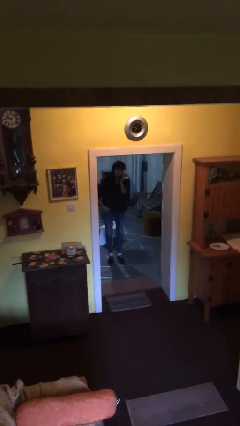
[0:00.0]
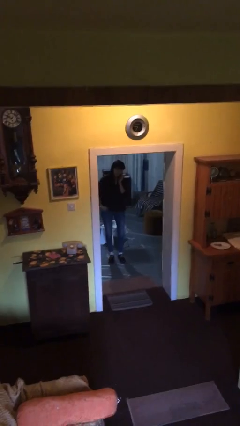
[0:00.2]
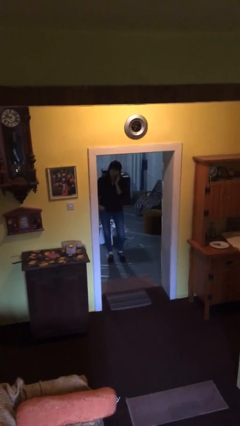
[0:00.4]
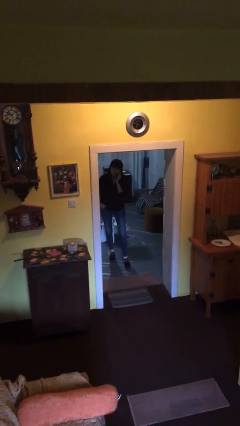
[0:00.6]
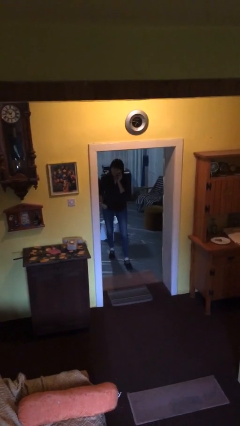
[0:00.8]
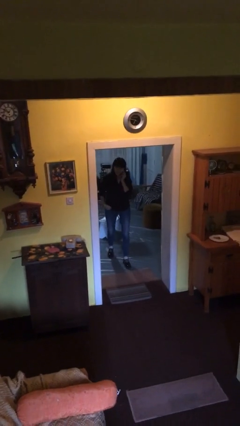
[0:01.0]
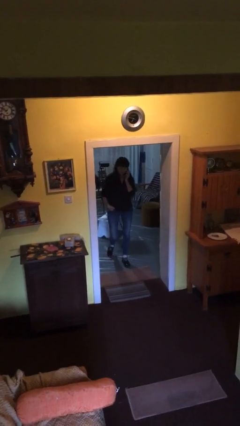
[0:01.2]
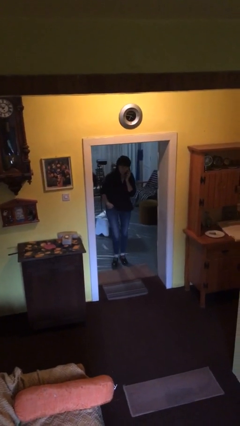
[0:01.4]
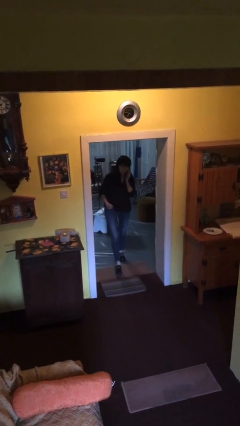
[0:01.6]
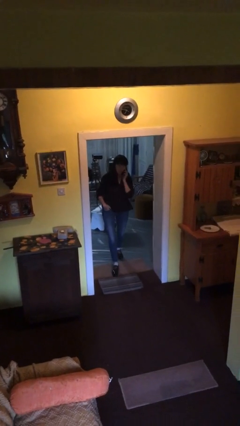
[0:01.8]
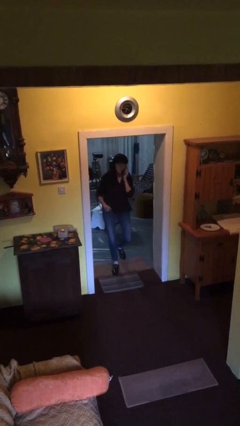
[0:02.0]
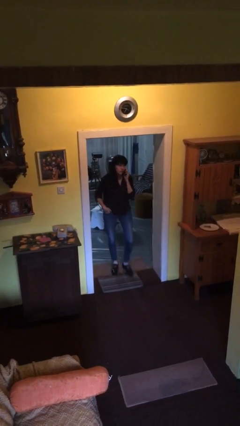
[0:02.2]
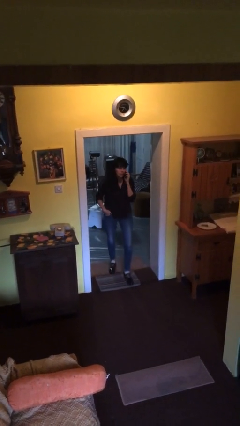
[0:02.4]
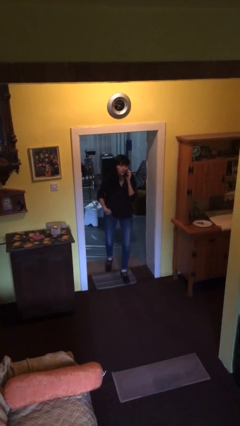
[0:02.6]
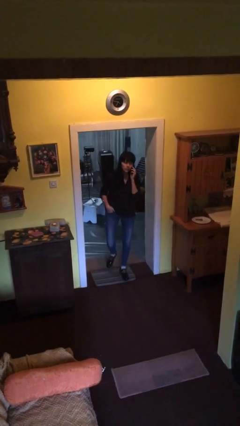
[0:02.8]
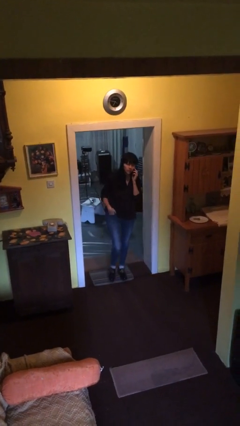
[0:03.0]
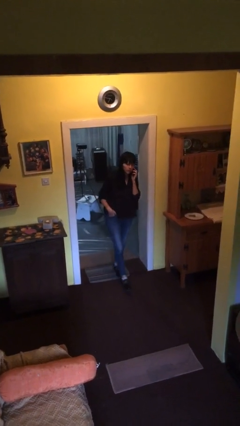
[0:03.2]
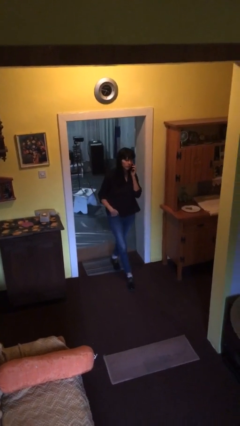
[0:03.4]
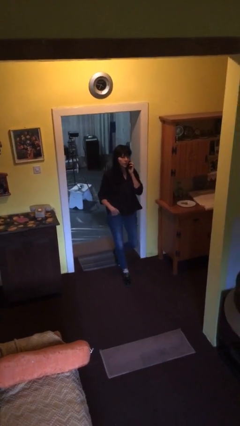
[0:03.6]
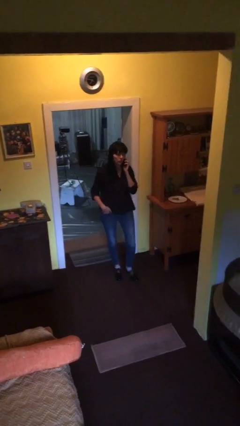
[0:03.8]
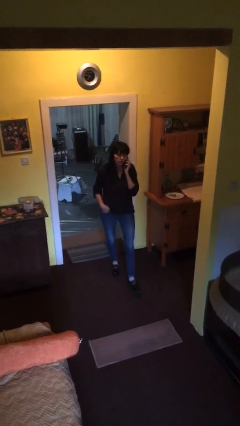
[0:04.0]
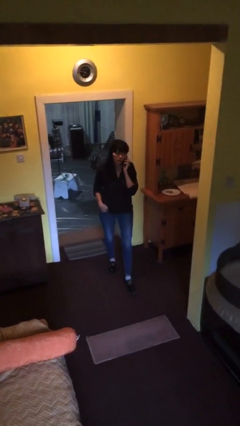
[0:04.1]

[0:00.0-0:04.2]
person enters scene through structure

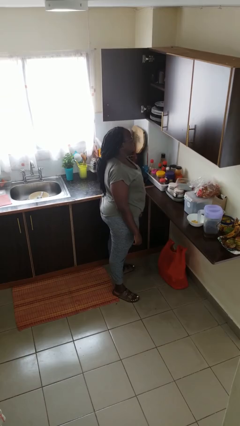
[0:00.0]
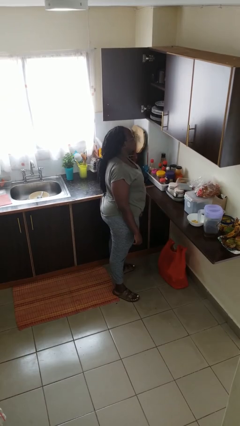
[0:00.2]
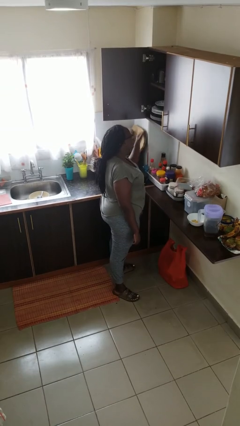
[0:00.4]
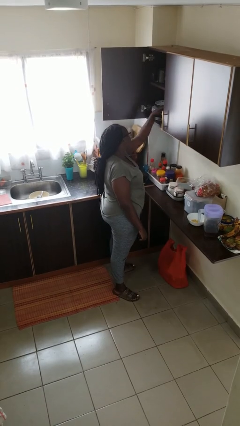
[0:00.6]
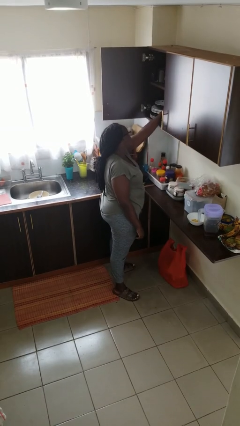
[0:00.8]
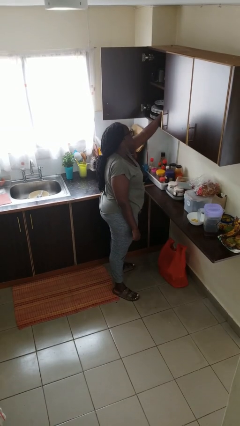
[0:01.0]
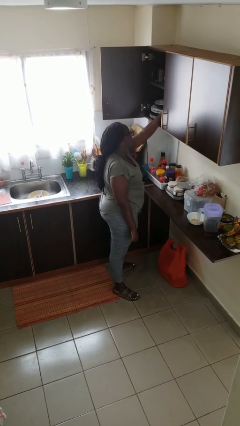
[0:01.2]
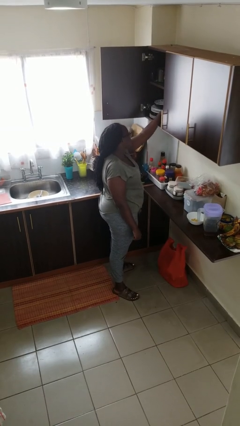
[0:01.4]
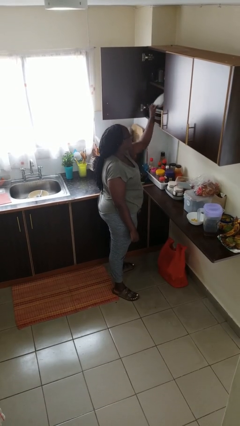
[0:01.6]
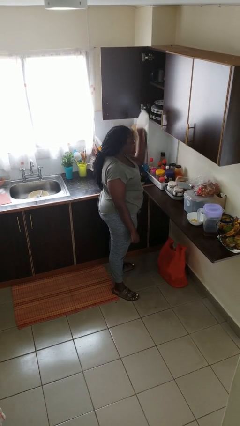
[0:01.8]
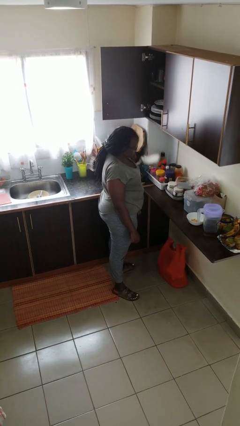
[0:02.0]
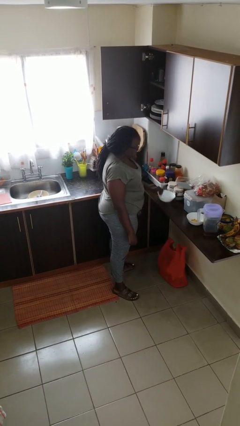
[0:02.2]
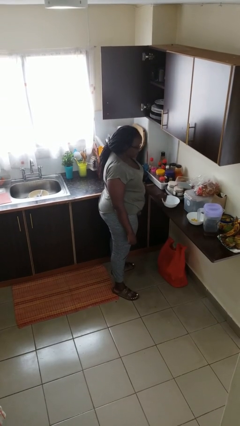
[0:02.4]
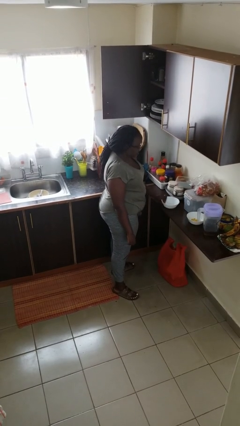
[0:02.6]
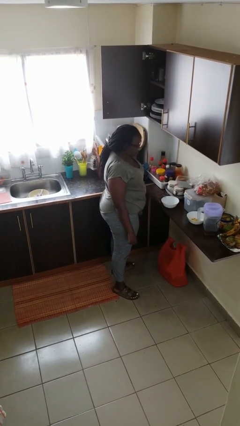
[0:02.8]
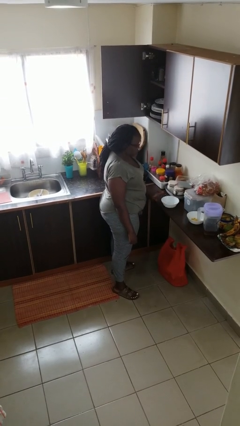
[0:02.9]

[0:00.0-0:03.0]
person takes object from cabinet

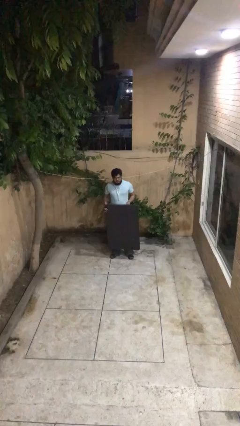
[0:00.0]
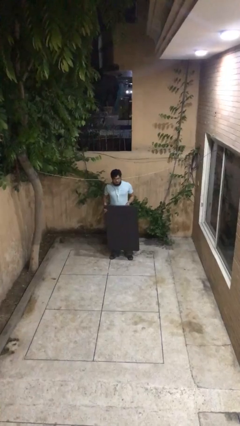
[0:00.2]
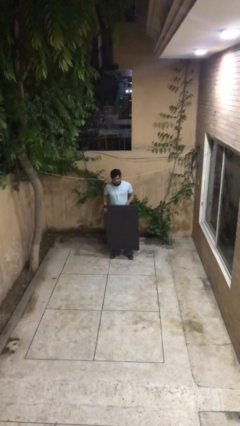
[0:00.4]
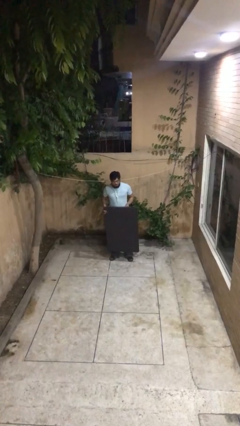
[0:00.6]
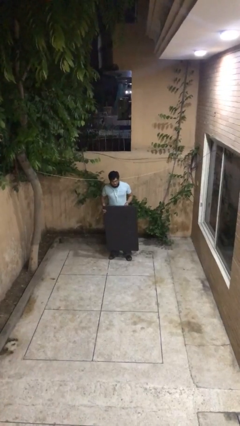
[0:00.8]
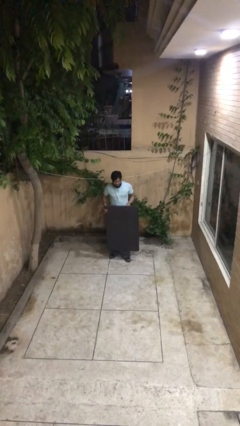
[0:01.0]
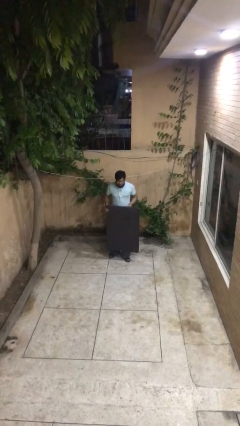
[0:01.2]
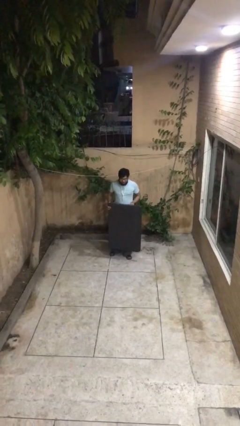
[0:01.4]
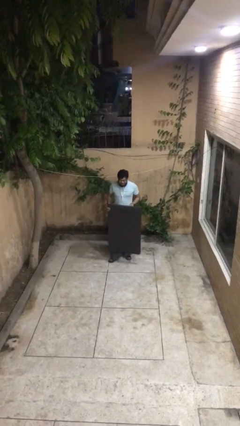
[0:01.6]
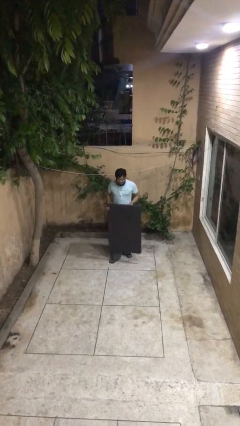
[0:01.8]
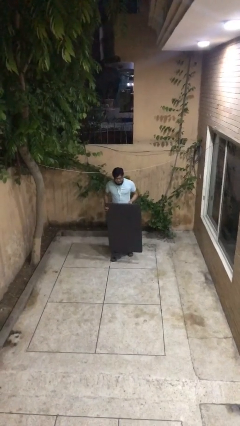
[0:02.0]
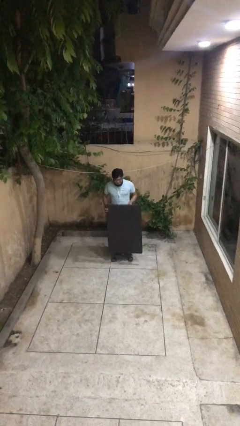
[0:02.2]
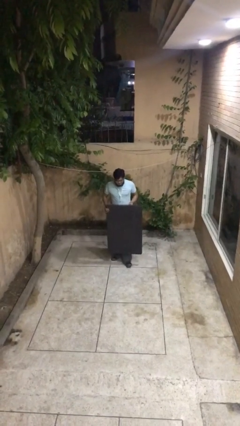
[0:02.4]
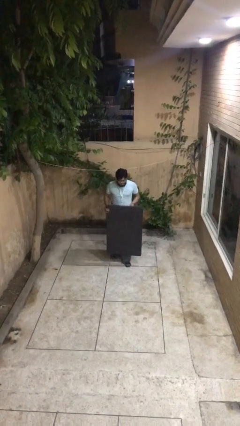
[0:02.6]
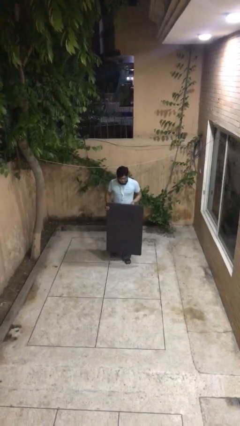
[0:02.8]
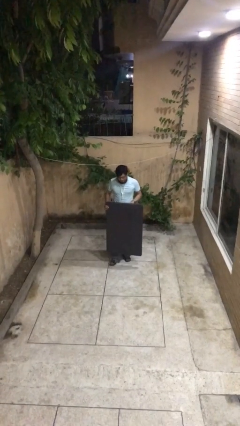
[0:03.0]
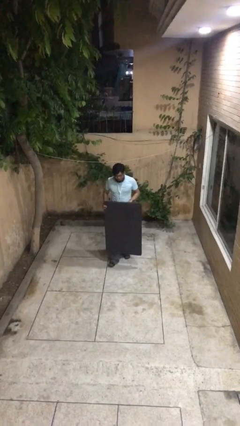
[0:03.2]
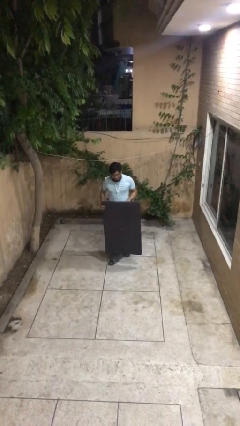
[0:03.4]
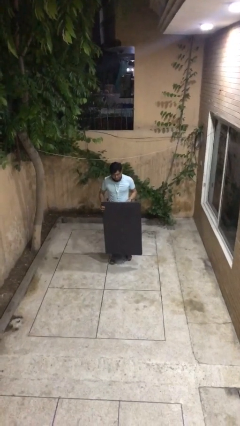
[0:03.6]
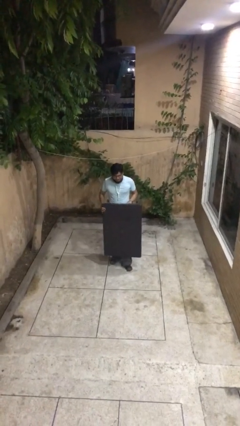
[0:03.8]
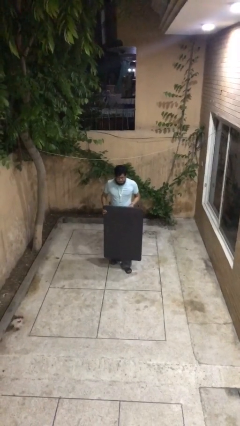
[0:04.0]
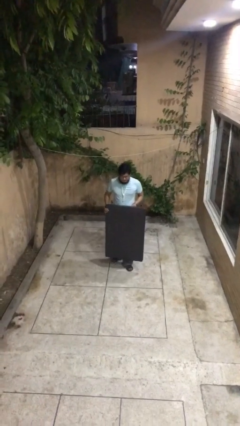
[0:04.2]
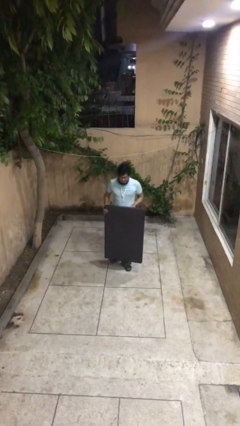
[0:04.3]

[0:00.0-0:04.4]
person carries heavy object

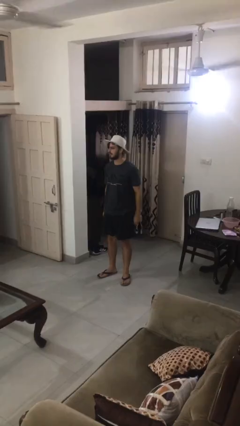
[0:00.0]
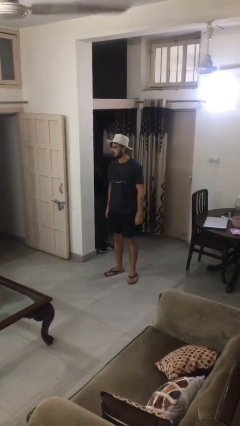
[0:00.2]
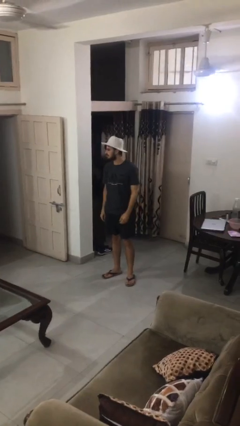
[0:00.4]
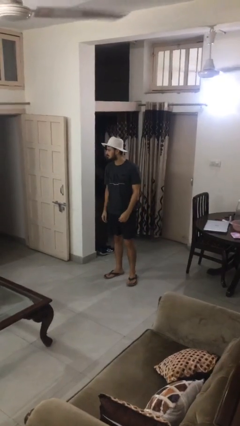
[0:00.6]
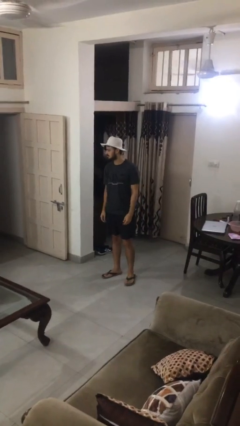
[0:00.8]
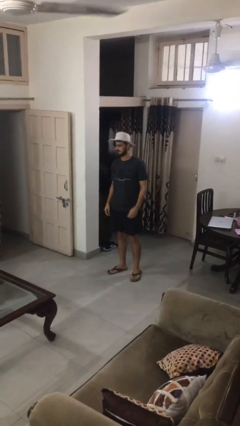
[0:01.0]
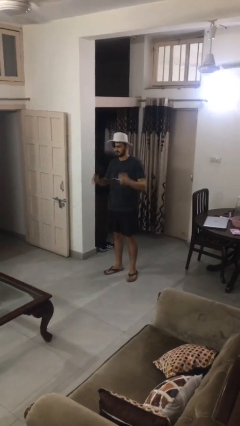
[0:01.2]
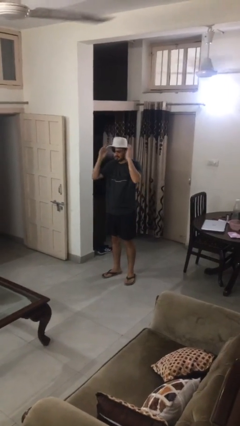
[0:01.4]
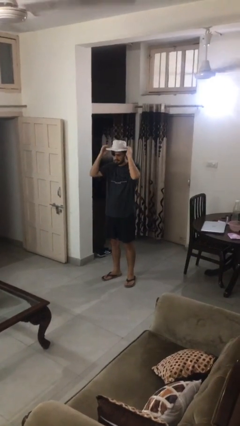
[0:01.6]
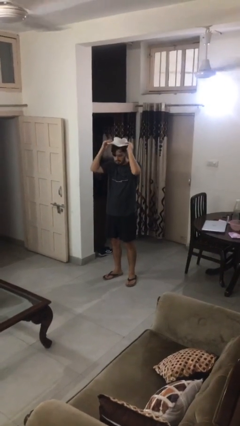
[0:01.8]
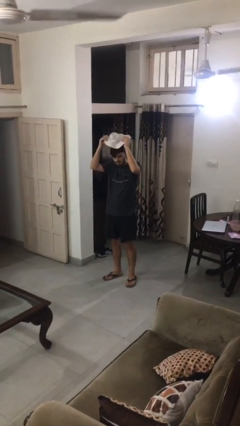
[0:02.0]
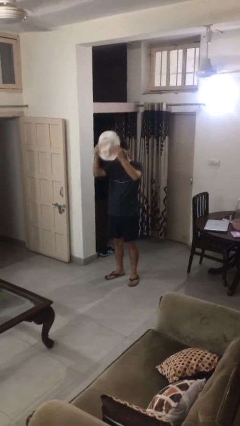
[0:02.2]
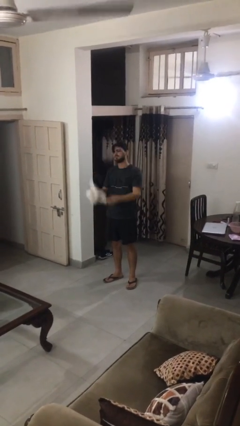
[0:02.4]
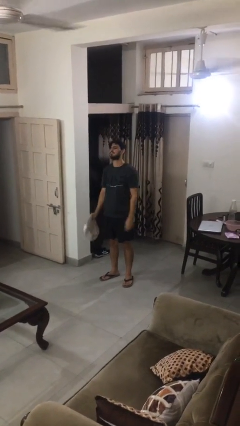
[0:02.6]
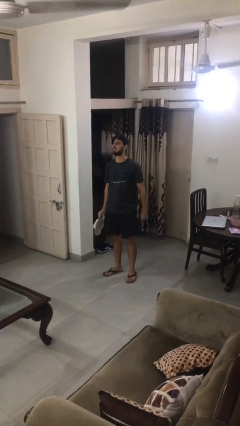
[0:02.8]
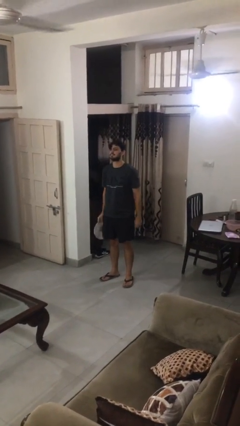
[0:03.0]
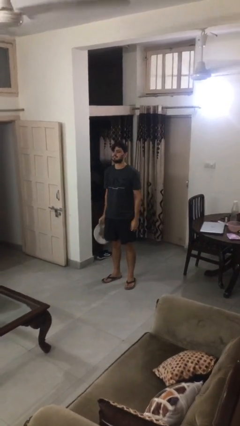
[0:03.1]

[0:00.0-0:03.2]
person takes off hat

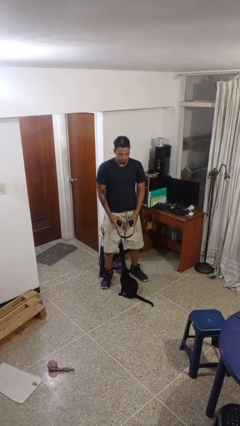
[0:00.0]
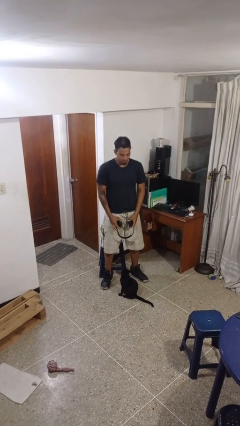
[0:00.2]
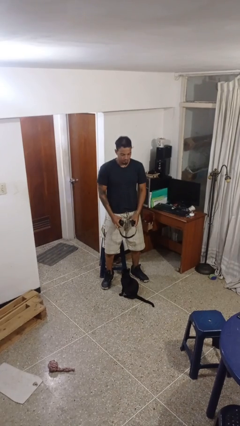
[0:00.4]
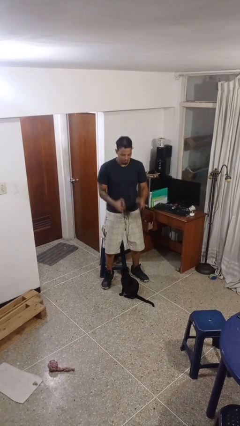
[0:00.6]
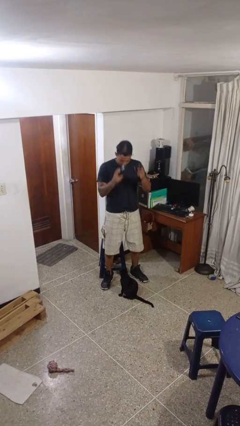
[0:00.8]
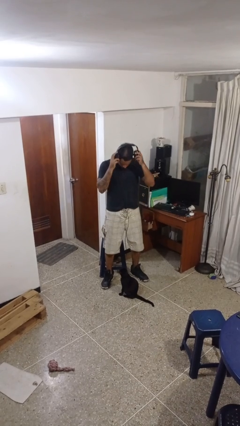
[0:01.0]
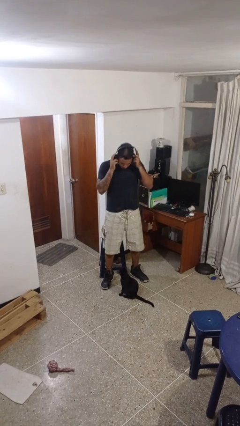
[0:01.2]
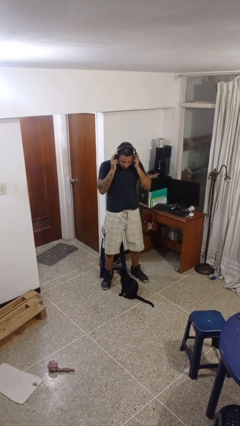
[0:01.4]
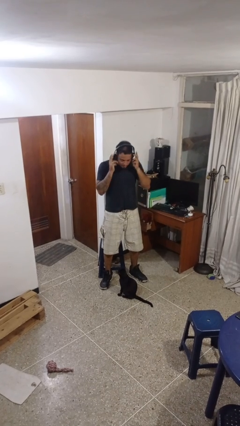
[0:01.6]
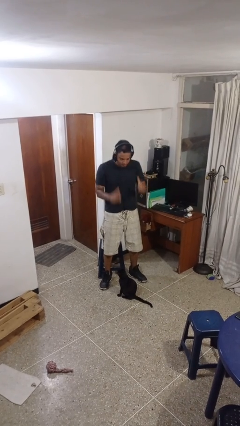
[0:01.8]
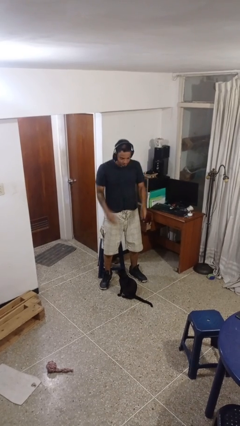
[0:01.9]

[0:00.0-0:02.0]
person puts on headphones

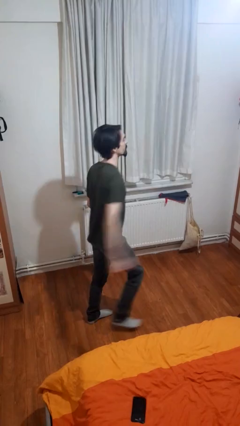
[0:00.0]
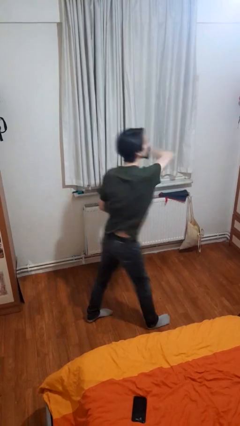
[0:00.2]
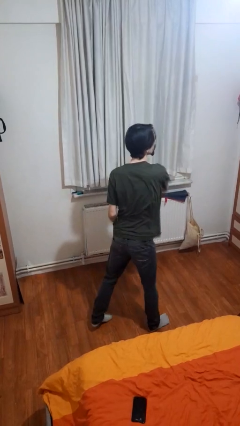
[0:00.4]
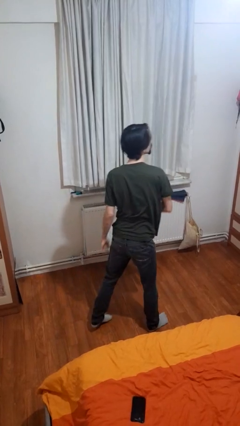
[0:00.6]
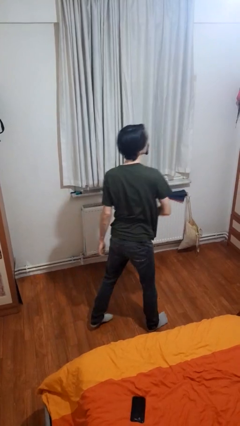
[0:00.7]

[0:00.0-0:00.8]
person punches
